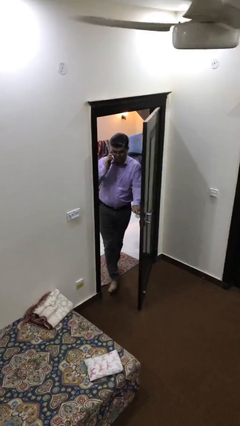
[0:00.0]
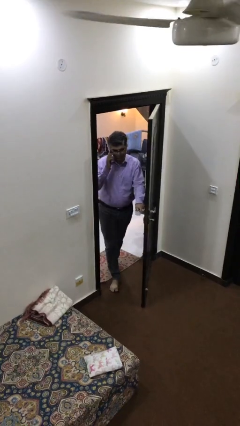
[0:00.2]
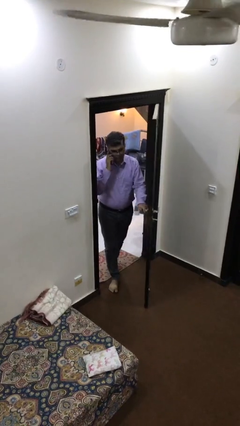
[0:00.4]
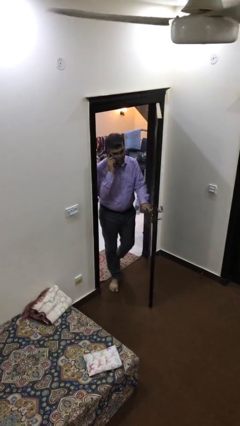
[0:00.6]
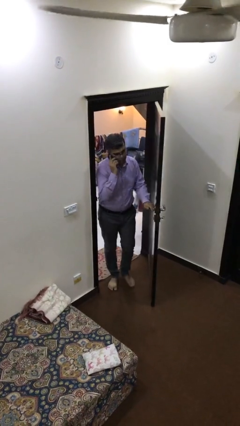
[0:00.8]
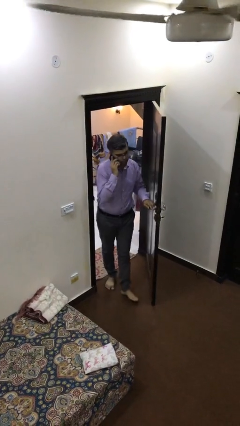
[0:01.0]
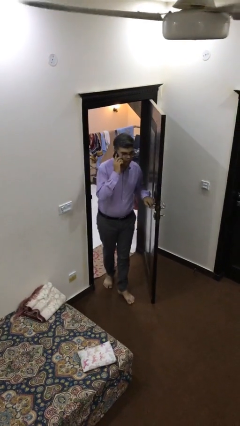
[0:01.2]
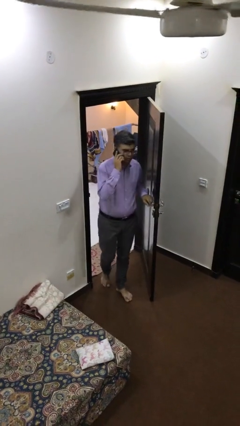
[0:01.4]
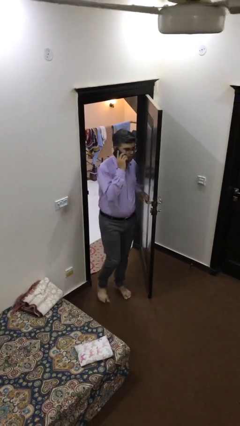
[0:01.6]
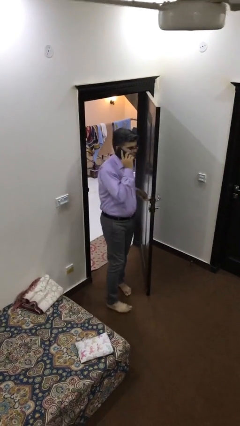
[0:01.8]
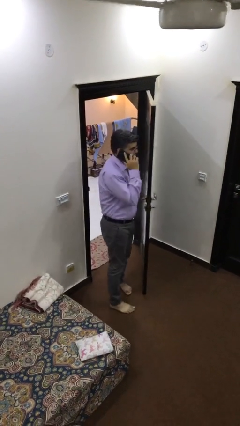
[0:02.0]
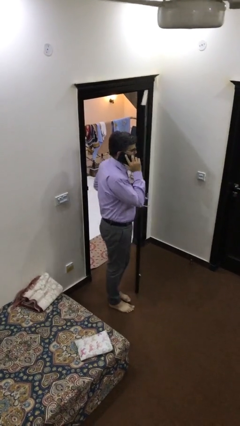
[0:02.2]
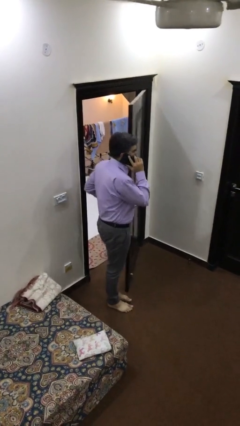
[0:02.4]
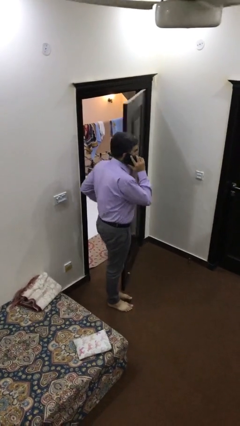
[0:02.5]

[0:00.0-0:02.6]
person enters scene through structure

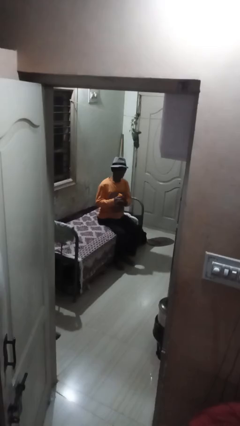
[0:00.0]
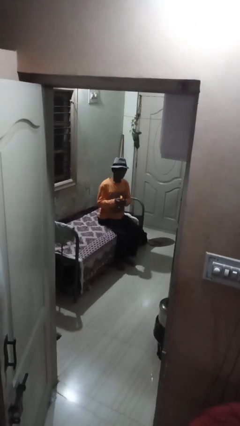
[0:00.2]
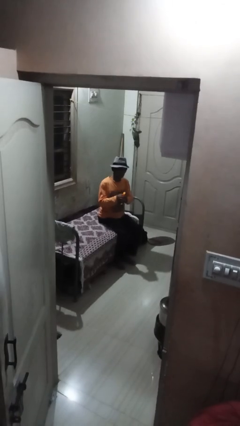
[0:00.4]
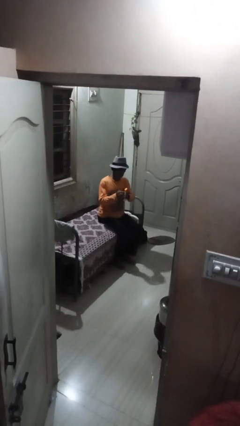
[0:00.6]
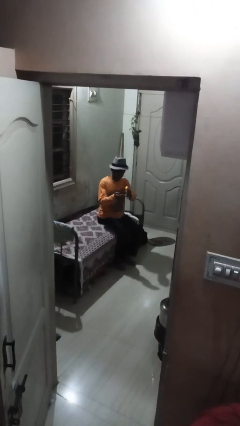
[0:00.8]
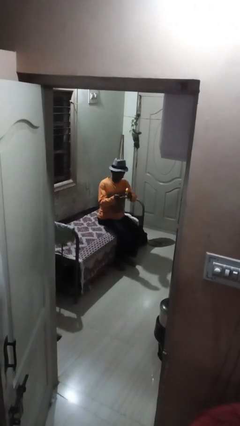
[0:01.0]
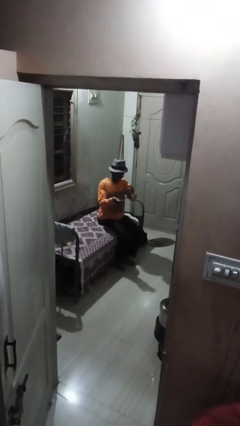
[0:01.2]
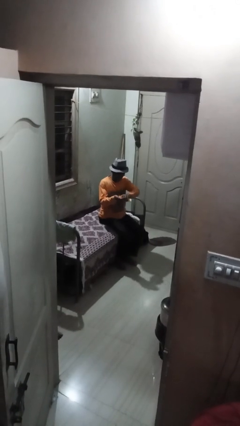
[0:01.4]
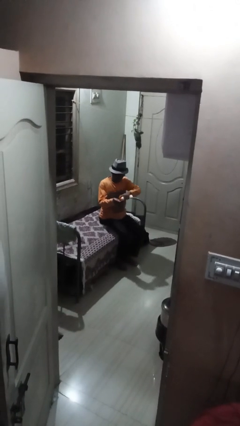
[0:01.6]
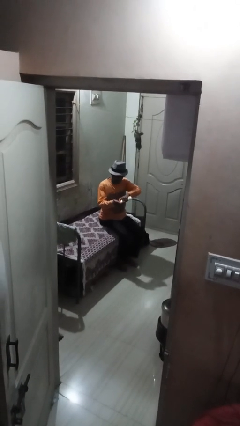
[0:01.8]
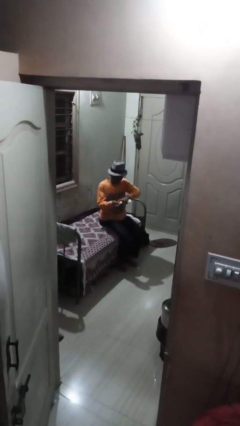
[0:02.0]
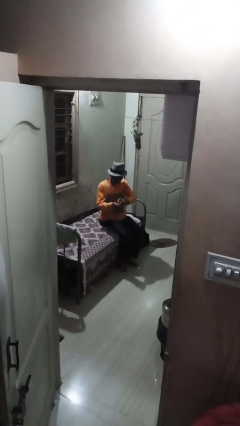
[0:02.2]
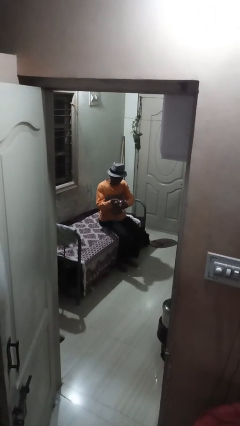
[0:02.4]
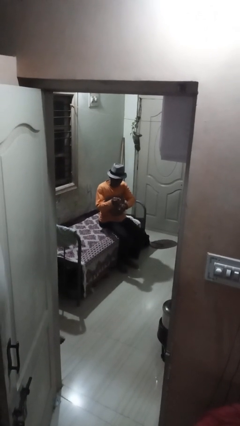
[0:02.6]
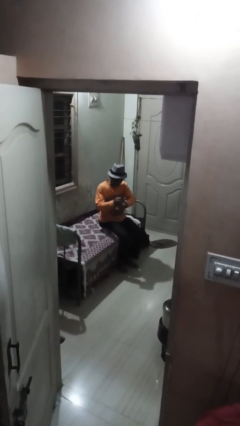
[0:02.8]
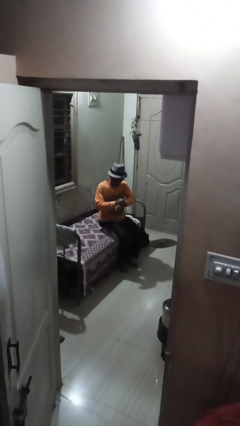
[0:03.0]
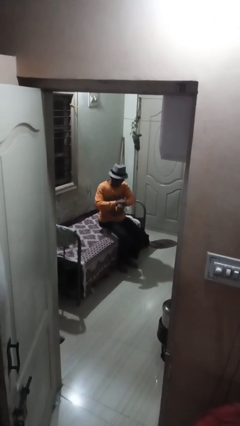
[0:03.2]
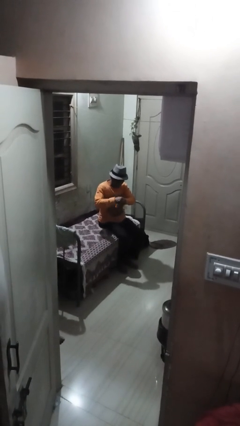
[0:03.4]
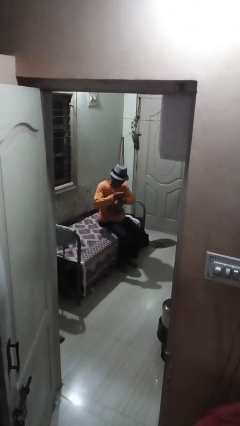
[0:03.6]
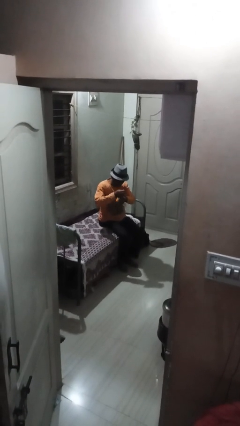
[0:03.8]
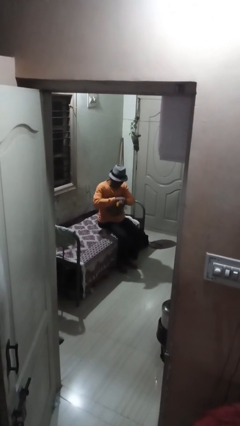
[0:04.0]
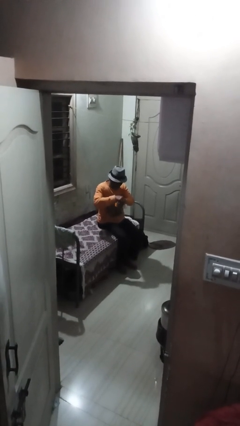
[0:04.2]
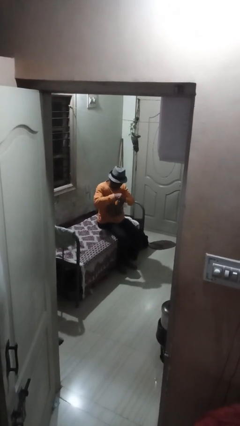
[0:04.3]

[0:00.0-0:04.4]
person applies facial moisturizer

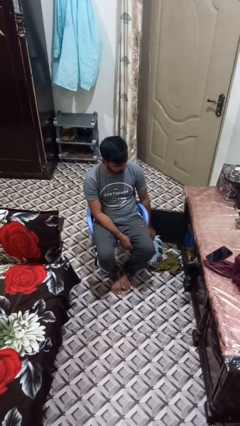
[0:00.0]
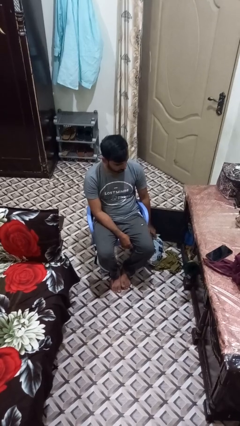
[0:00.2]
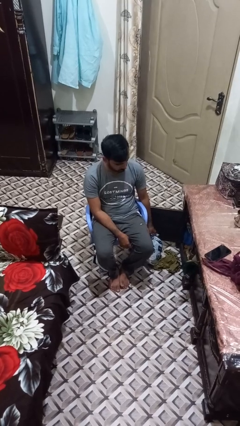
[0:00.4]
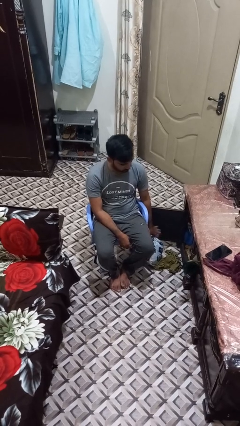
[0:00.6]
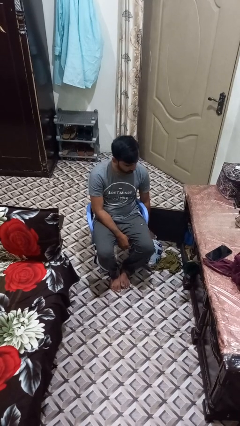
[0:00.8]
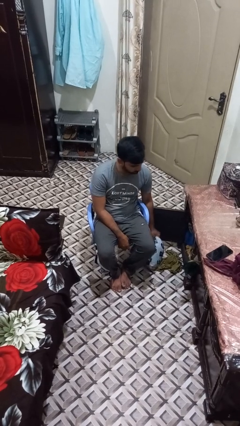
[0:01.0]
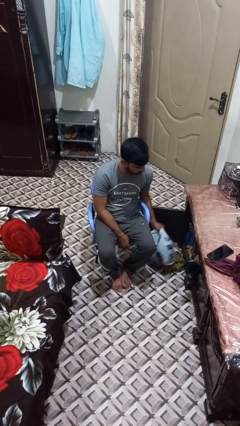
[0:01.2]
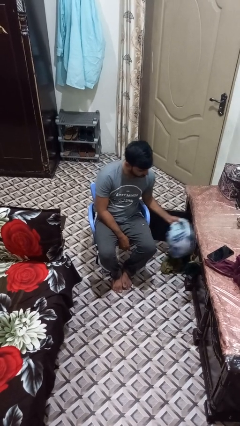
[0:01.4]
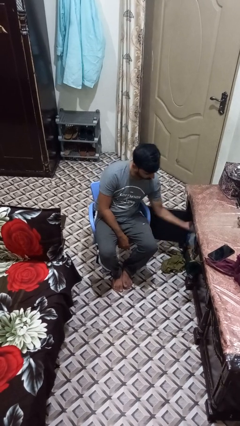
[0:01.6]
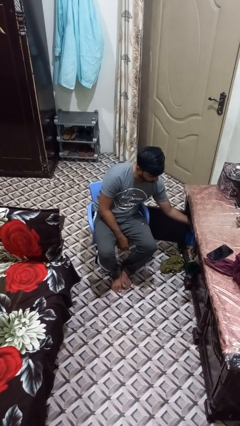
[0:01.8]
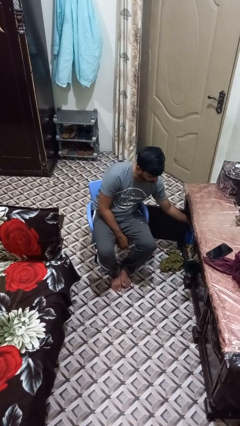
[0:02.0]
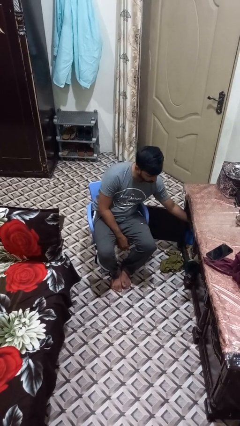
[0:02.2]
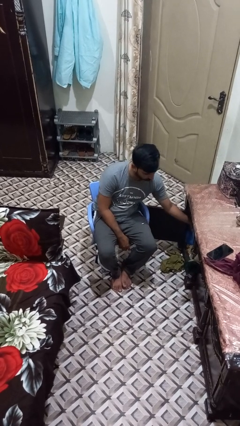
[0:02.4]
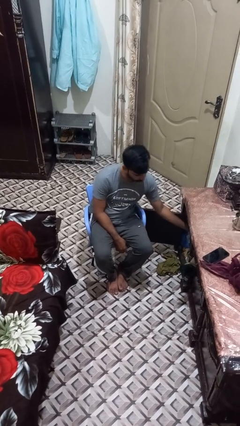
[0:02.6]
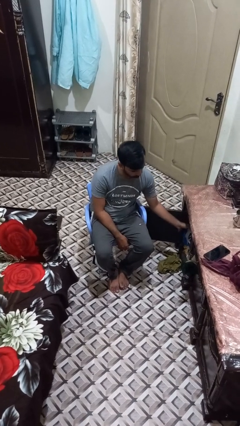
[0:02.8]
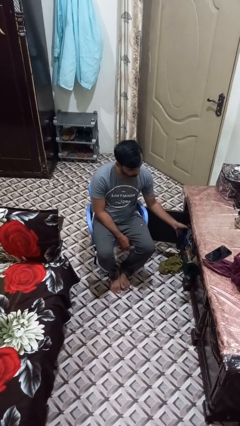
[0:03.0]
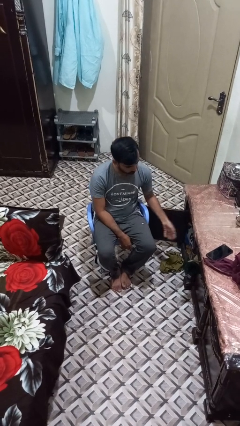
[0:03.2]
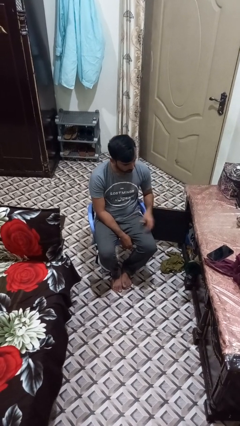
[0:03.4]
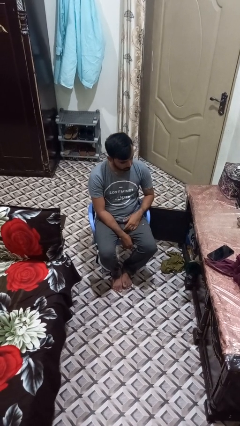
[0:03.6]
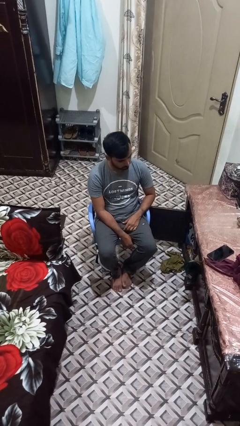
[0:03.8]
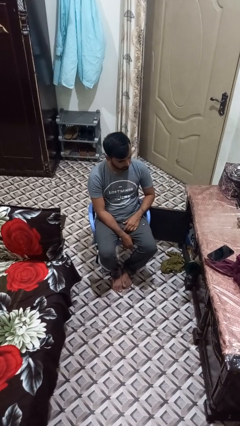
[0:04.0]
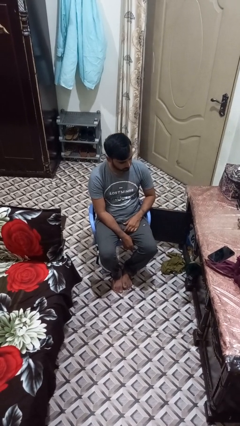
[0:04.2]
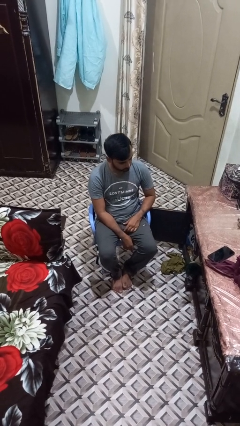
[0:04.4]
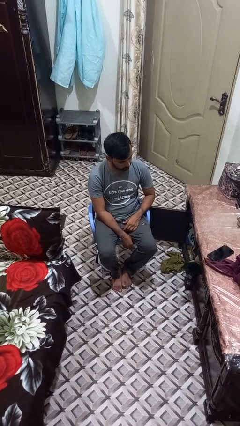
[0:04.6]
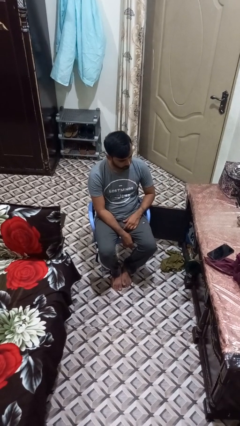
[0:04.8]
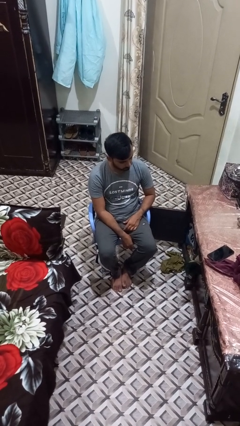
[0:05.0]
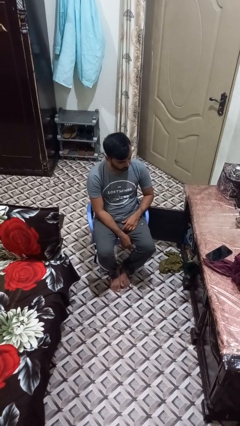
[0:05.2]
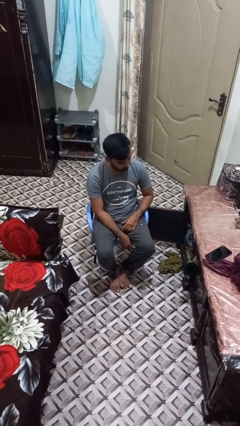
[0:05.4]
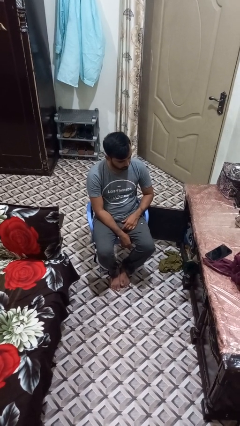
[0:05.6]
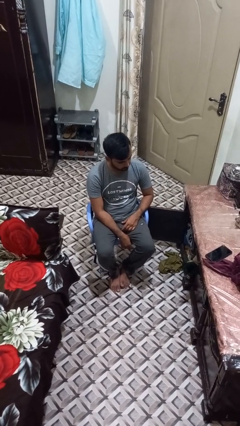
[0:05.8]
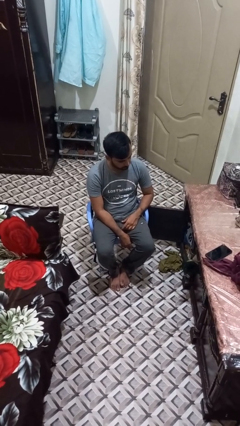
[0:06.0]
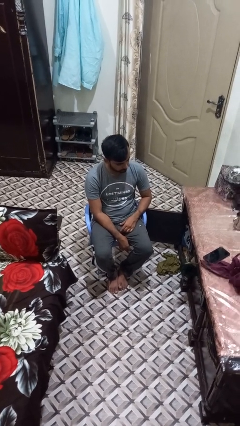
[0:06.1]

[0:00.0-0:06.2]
person puts down object into cabinet

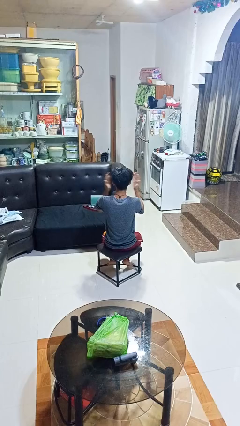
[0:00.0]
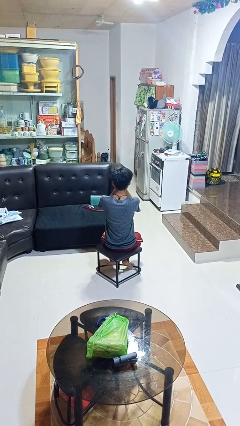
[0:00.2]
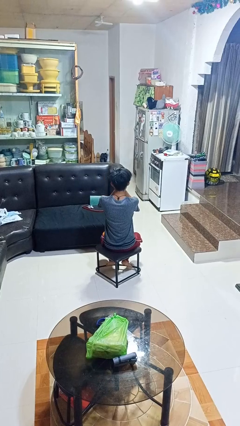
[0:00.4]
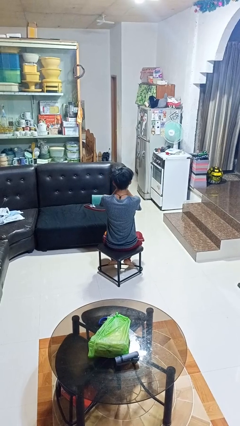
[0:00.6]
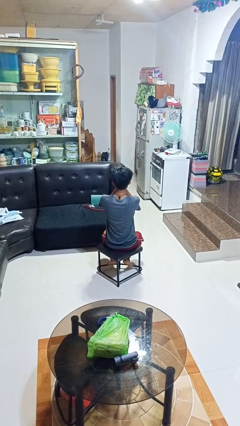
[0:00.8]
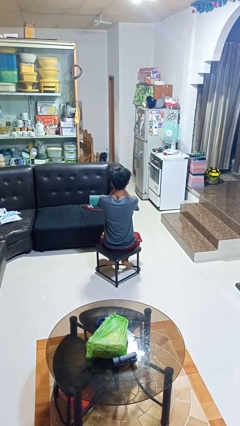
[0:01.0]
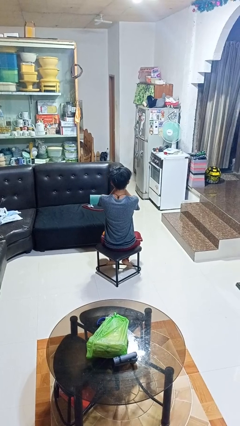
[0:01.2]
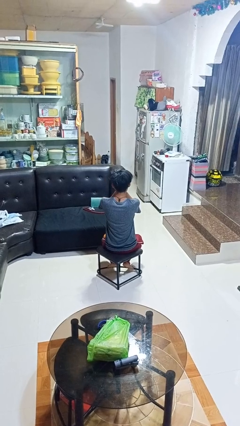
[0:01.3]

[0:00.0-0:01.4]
person covers face with hands

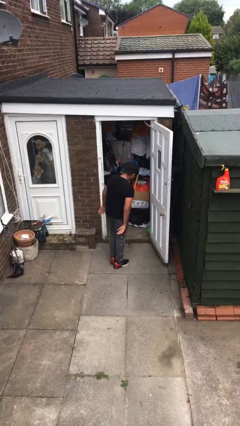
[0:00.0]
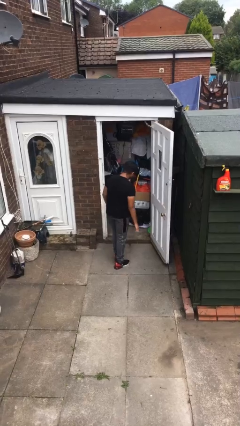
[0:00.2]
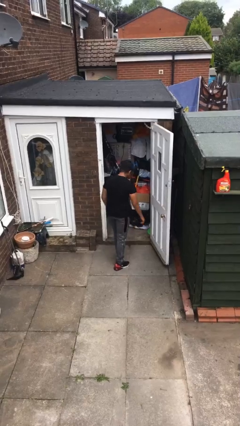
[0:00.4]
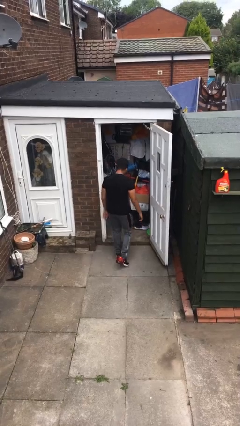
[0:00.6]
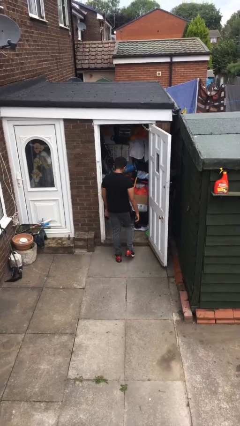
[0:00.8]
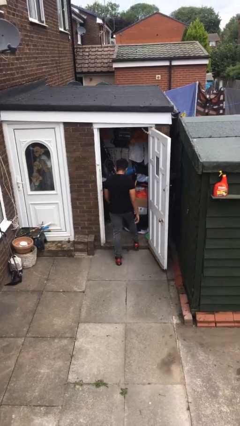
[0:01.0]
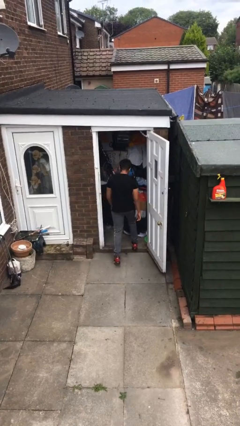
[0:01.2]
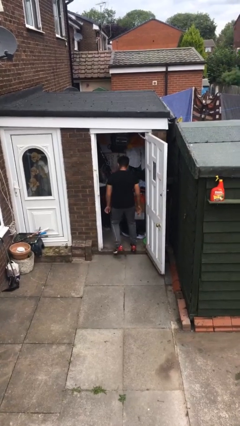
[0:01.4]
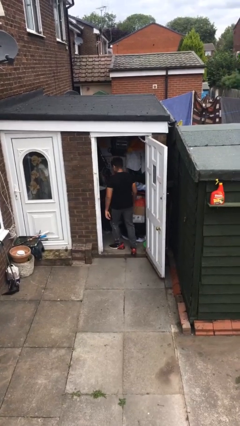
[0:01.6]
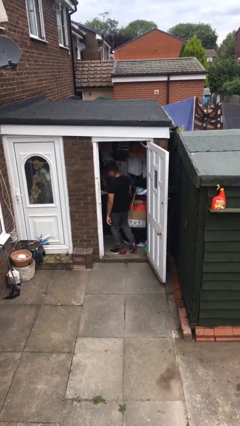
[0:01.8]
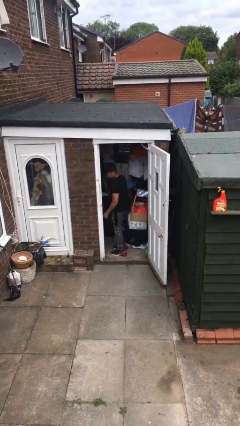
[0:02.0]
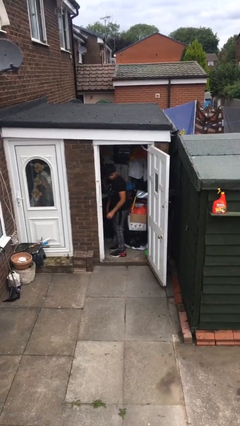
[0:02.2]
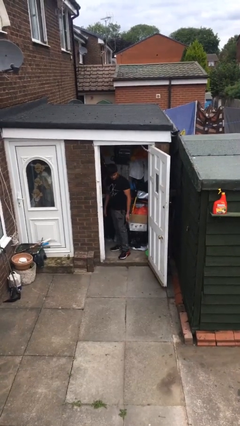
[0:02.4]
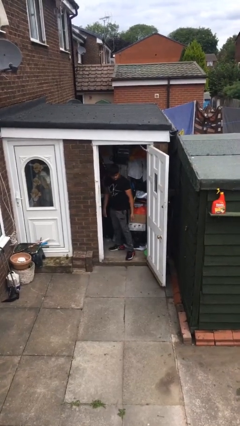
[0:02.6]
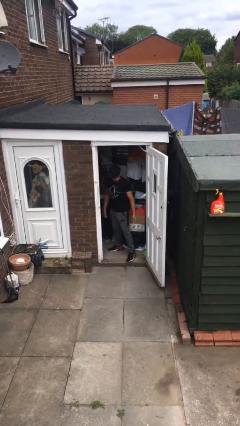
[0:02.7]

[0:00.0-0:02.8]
person exits scene through structure

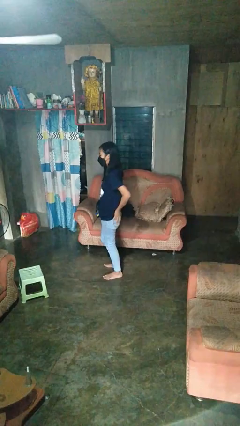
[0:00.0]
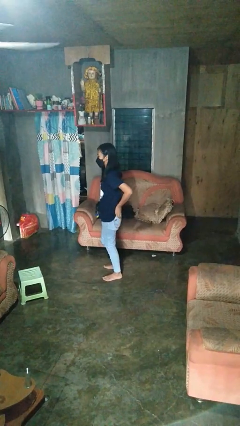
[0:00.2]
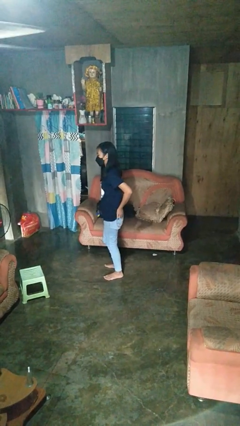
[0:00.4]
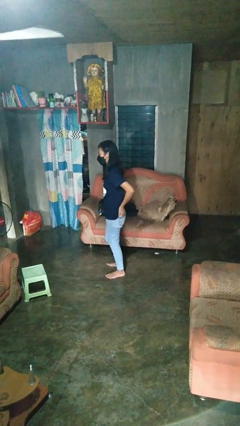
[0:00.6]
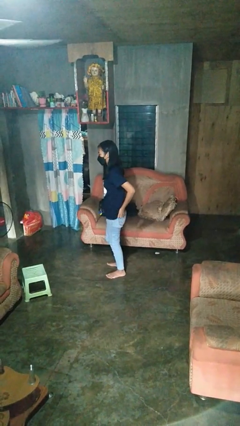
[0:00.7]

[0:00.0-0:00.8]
person puts hands in back pockets
